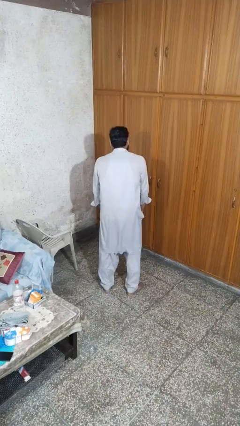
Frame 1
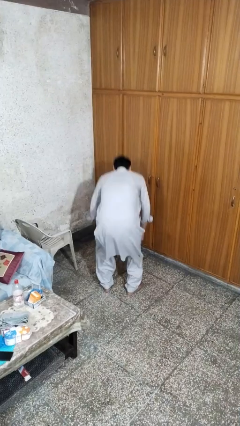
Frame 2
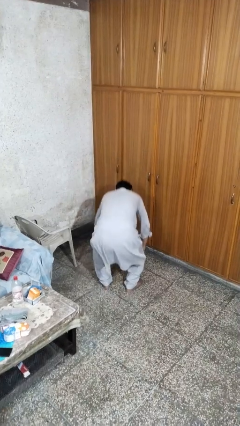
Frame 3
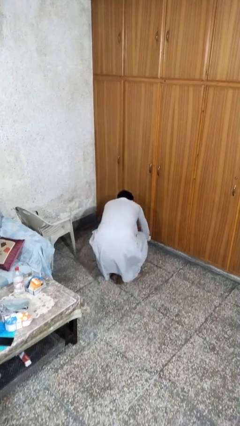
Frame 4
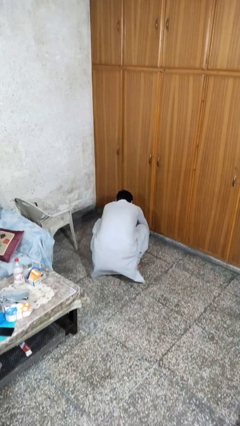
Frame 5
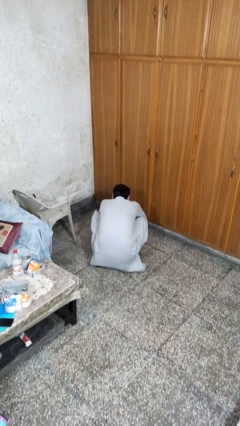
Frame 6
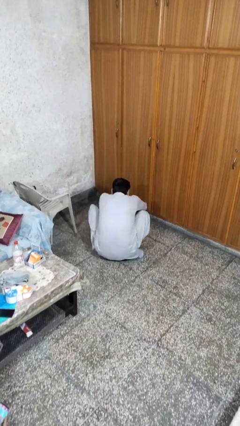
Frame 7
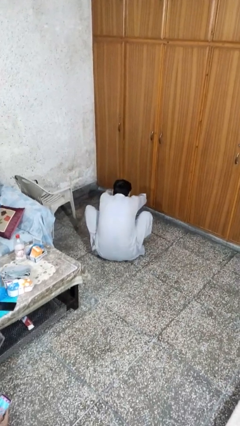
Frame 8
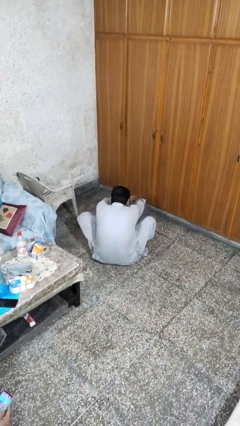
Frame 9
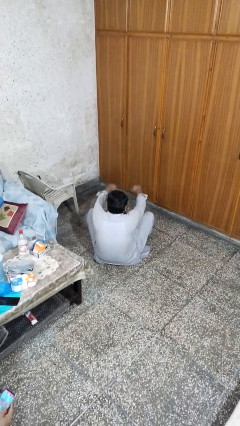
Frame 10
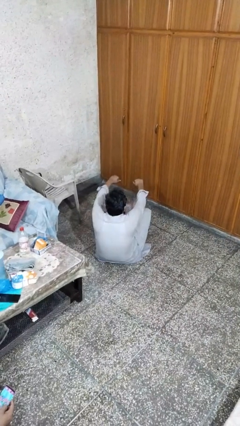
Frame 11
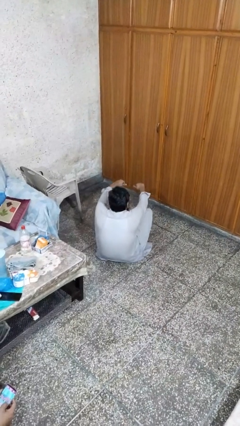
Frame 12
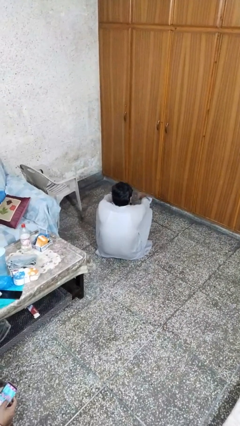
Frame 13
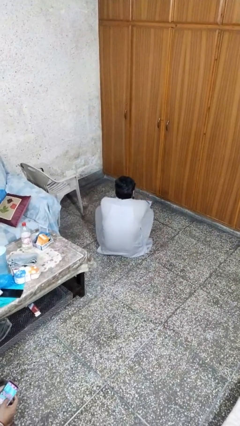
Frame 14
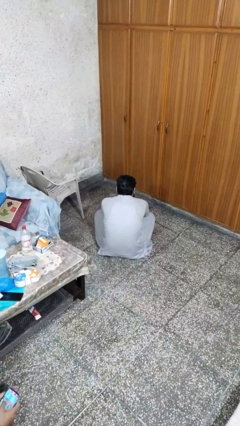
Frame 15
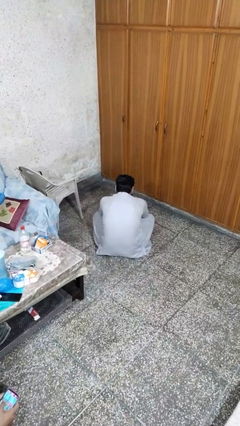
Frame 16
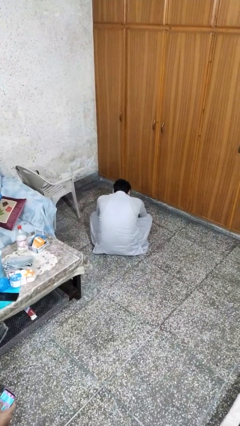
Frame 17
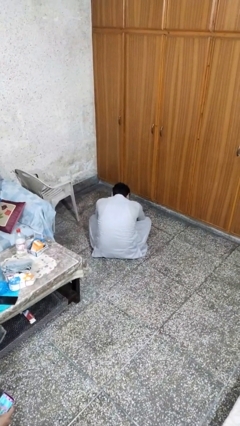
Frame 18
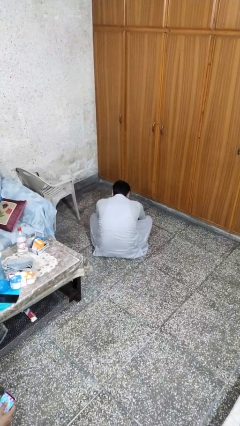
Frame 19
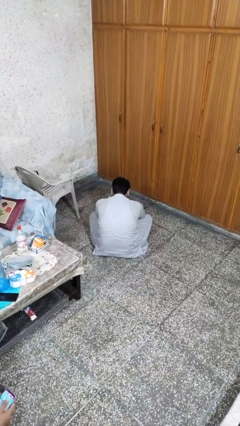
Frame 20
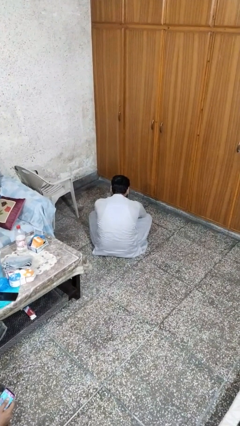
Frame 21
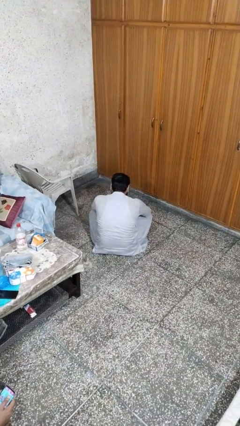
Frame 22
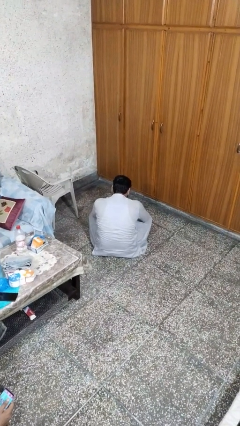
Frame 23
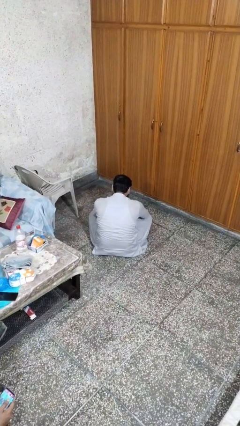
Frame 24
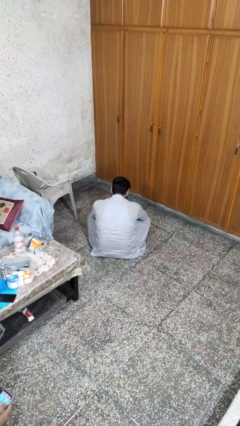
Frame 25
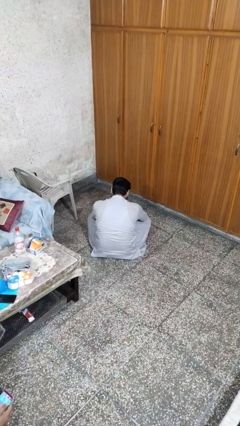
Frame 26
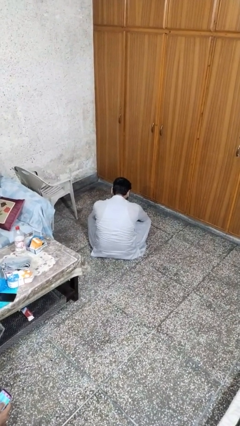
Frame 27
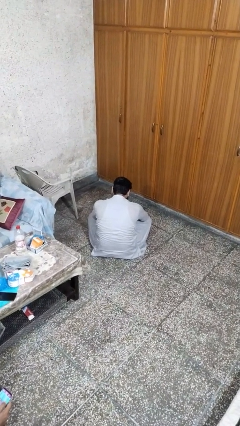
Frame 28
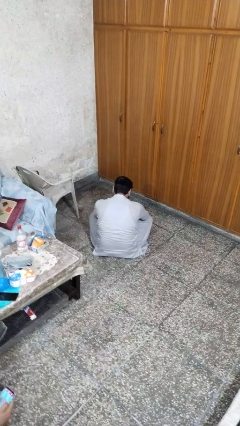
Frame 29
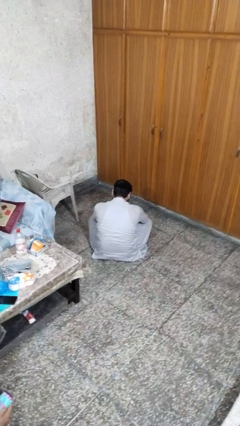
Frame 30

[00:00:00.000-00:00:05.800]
person sits crisscross

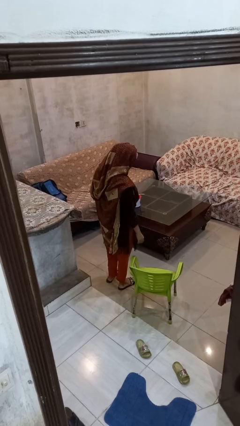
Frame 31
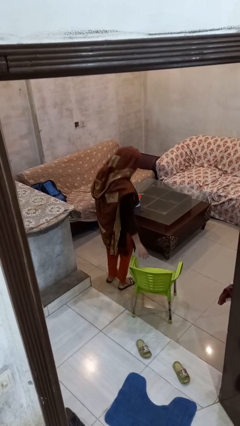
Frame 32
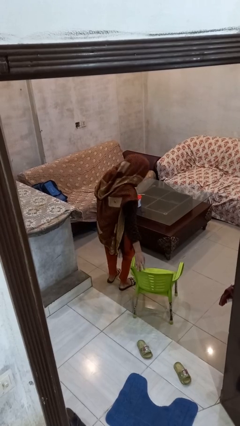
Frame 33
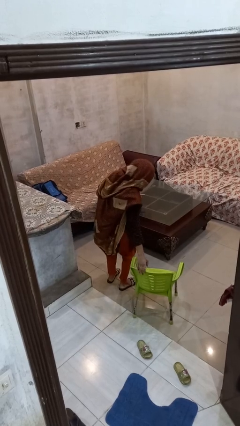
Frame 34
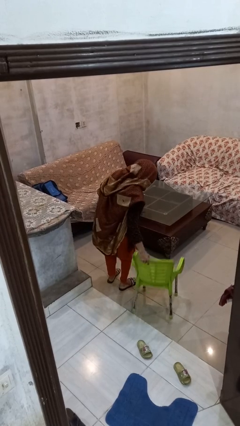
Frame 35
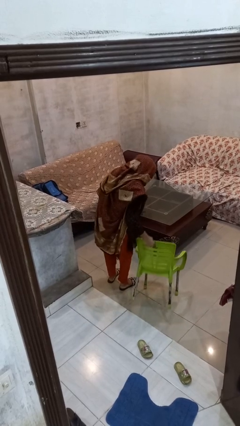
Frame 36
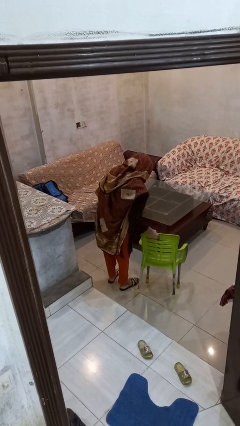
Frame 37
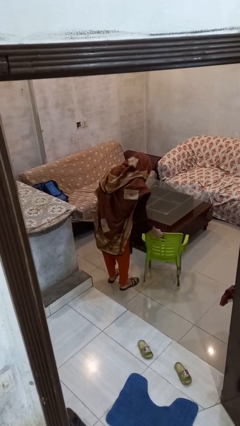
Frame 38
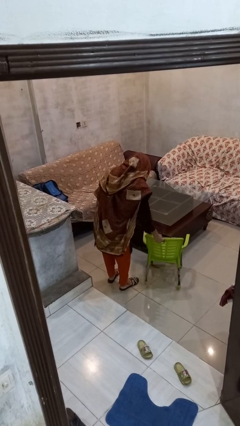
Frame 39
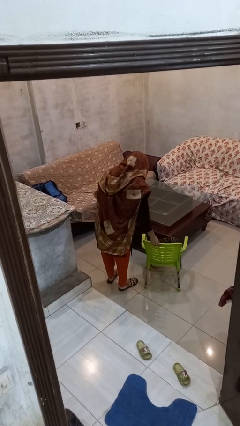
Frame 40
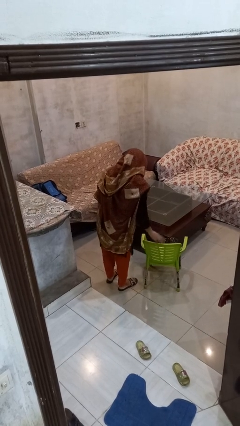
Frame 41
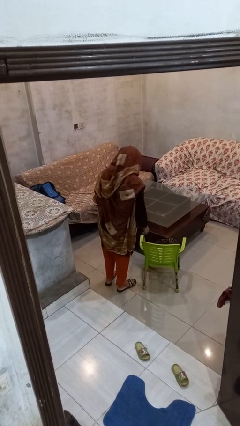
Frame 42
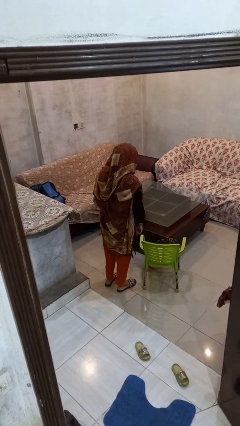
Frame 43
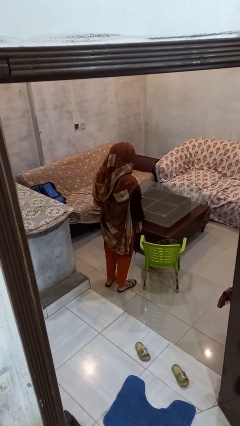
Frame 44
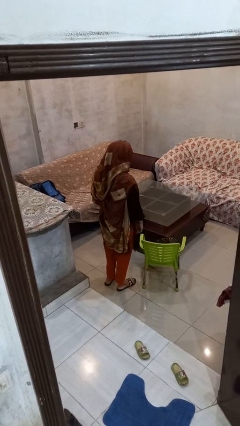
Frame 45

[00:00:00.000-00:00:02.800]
person pushes in chair

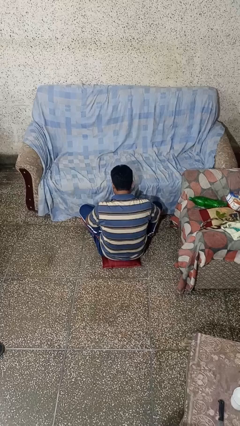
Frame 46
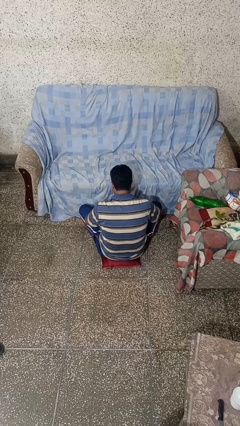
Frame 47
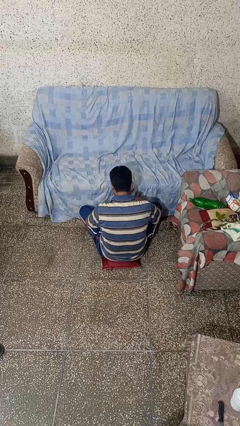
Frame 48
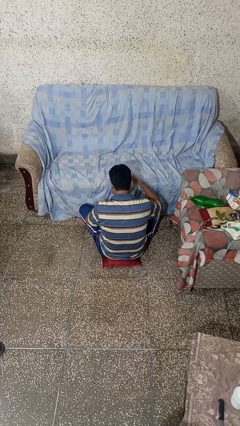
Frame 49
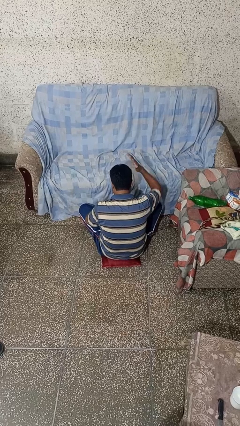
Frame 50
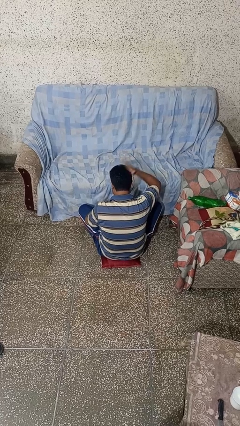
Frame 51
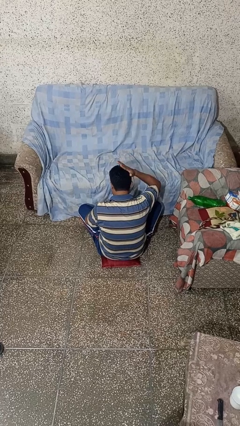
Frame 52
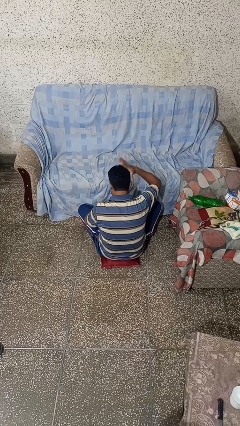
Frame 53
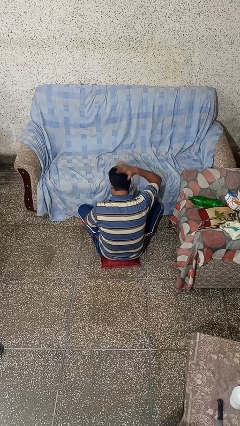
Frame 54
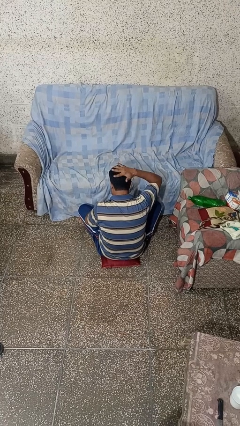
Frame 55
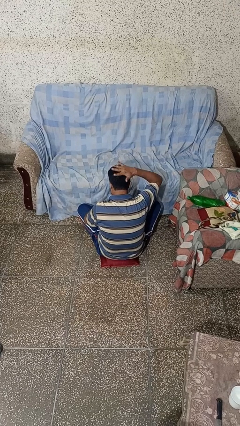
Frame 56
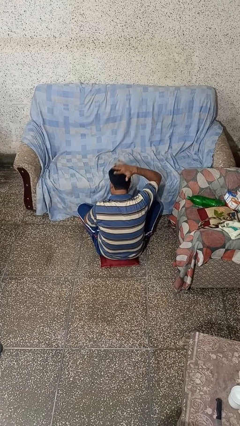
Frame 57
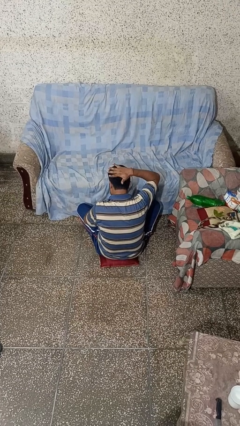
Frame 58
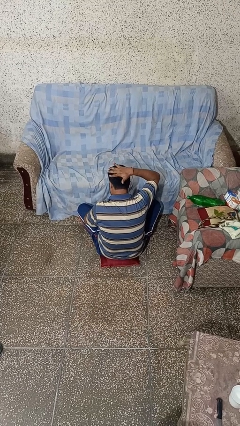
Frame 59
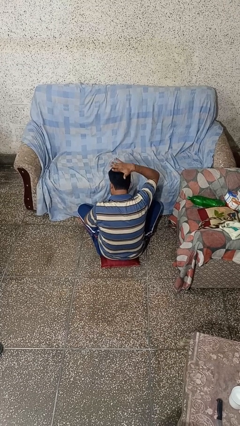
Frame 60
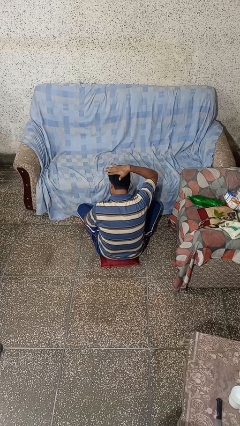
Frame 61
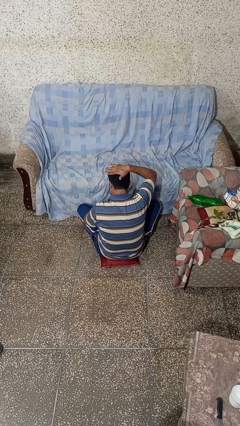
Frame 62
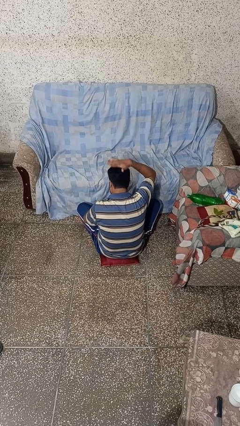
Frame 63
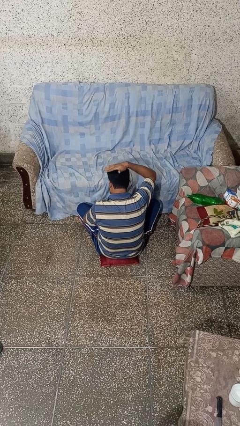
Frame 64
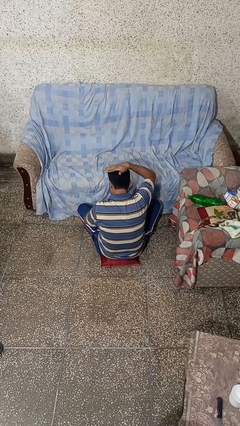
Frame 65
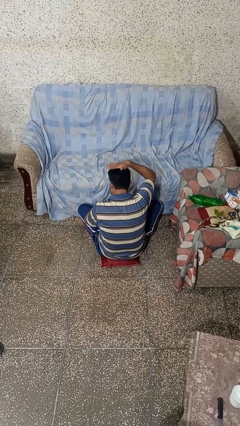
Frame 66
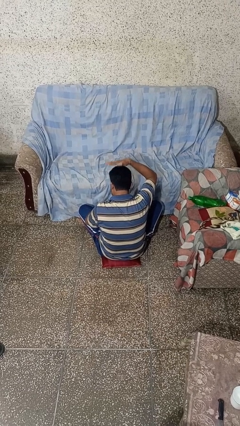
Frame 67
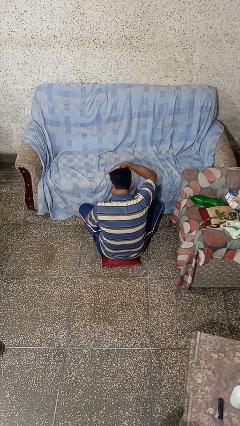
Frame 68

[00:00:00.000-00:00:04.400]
person pats head

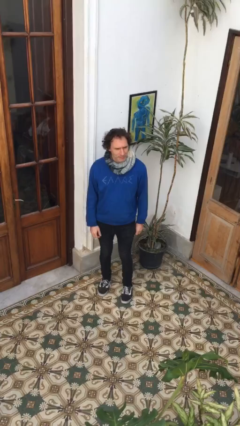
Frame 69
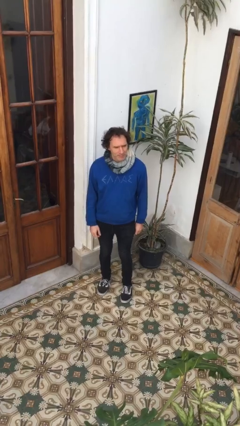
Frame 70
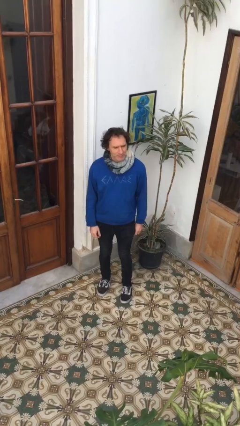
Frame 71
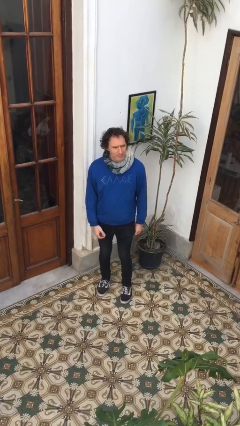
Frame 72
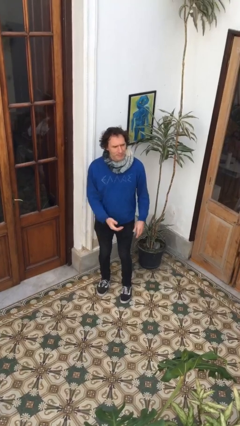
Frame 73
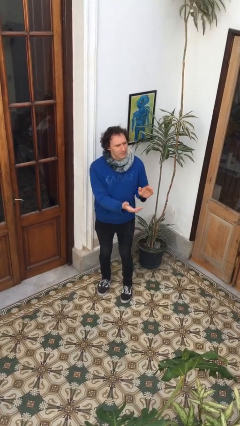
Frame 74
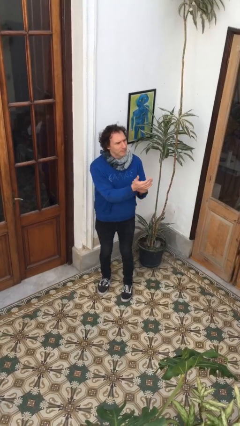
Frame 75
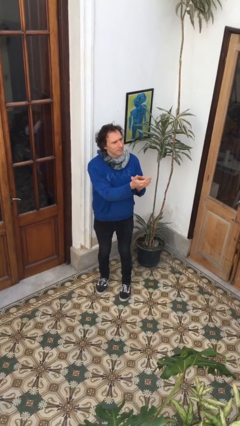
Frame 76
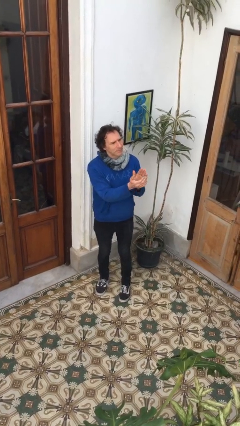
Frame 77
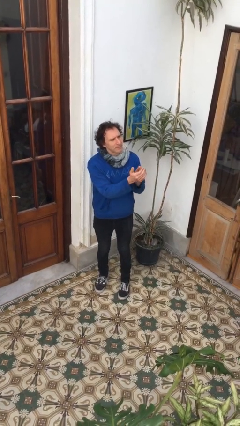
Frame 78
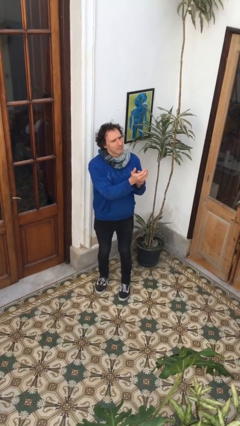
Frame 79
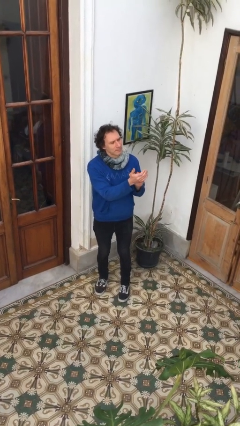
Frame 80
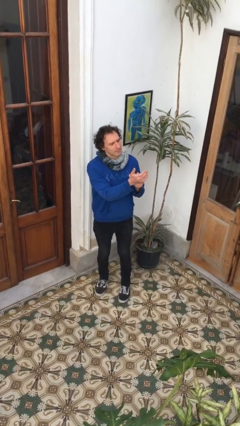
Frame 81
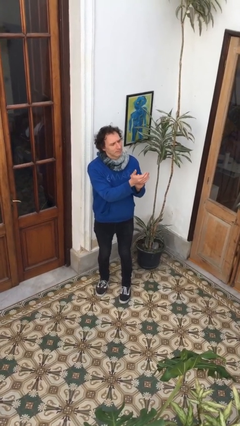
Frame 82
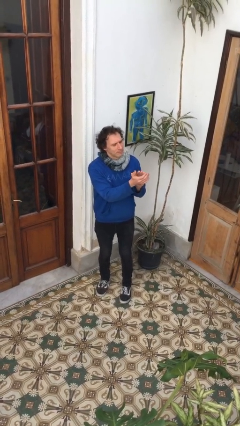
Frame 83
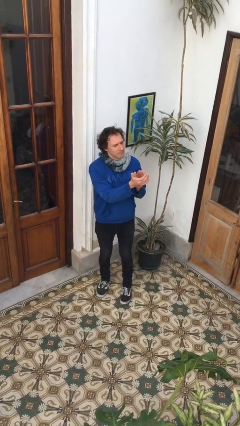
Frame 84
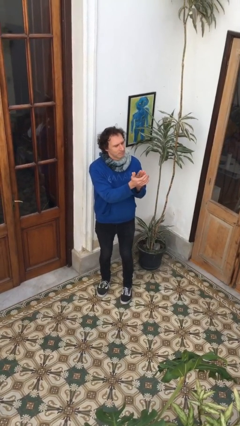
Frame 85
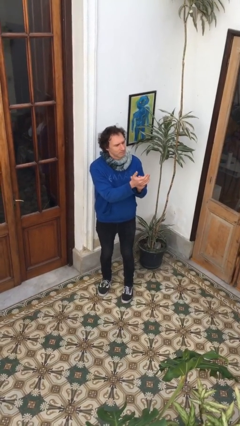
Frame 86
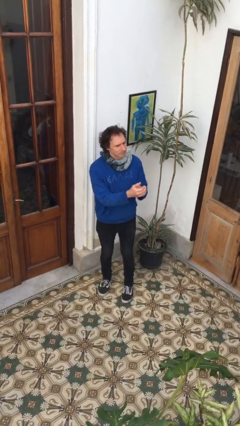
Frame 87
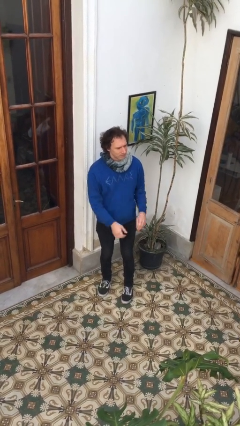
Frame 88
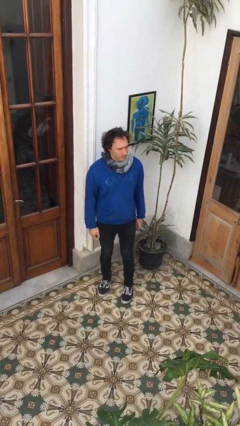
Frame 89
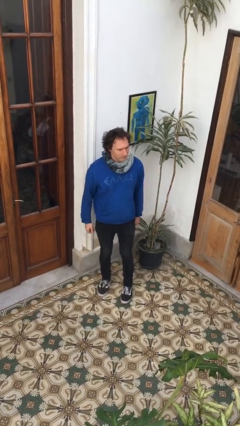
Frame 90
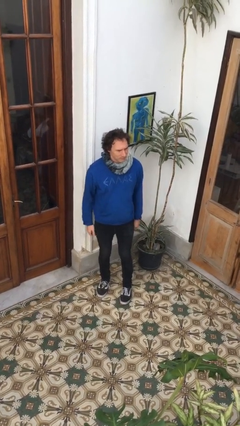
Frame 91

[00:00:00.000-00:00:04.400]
person claps hands

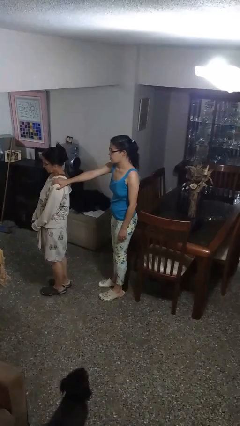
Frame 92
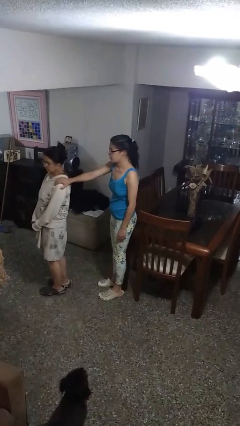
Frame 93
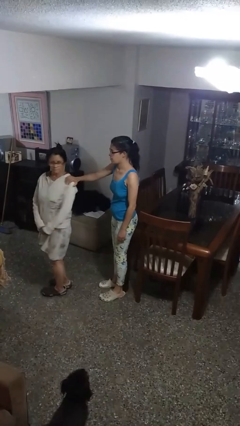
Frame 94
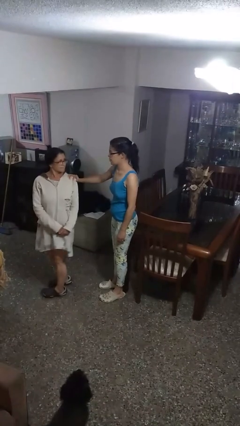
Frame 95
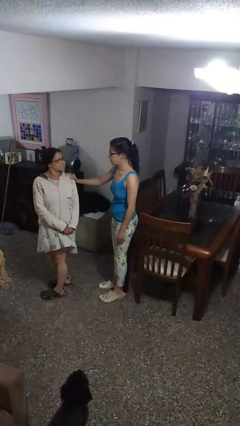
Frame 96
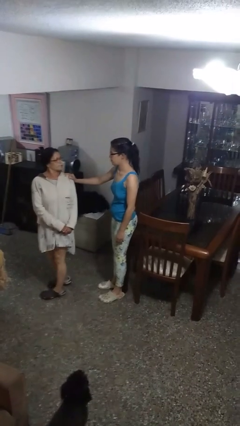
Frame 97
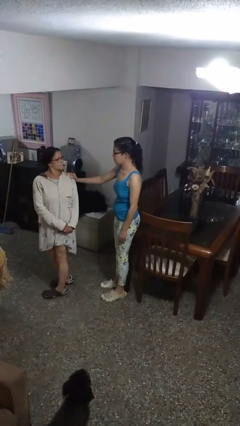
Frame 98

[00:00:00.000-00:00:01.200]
person spins person around
